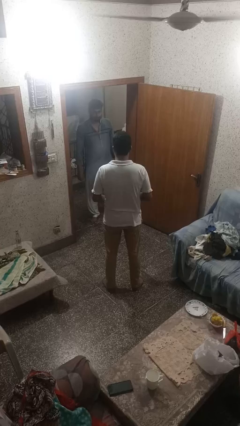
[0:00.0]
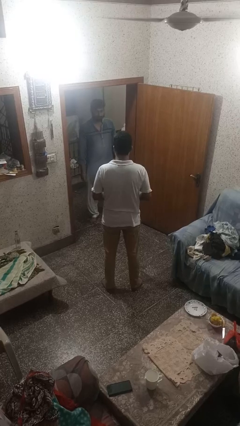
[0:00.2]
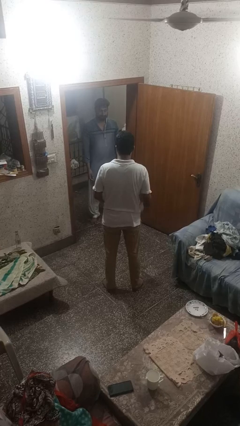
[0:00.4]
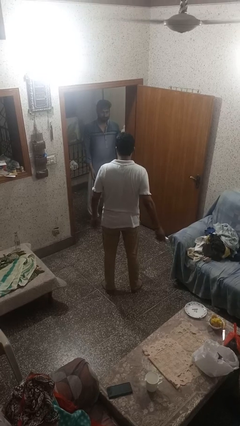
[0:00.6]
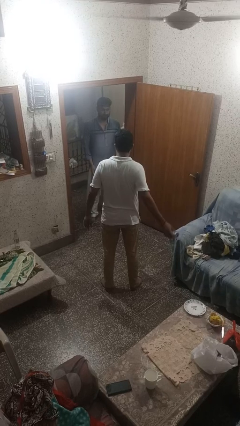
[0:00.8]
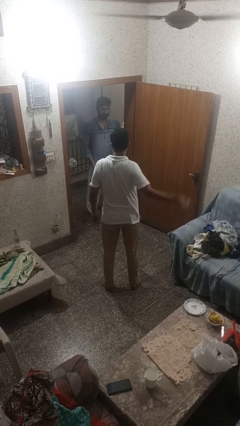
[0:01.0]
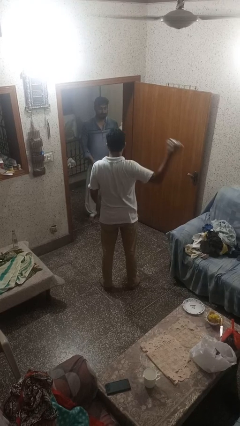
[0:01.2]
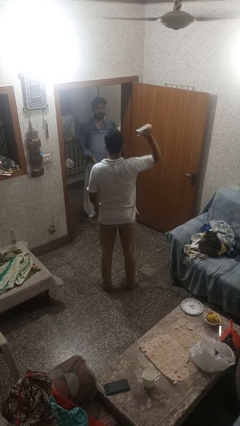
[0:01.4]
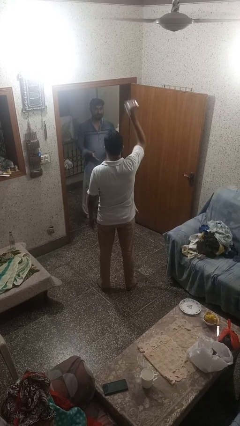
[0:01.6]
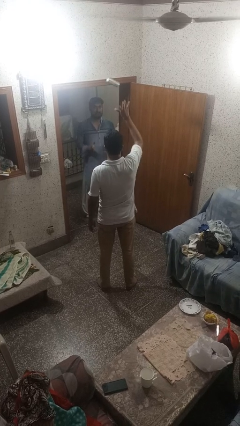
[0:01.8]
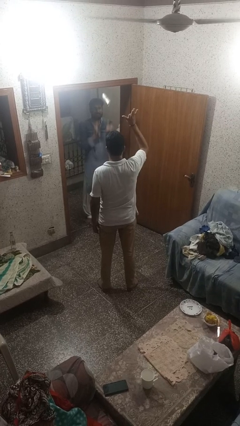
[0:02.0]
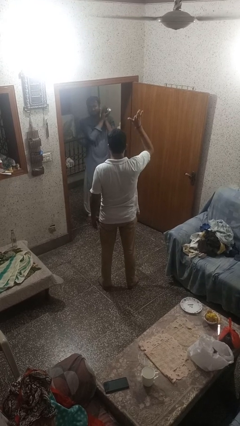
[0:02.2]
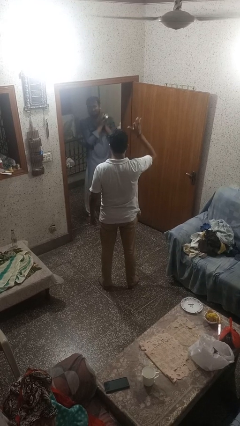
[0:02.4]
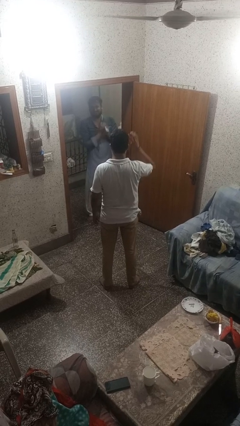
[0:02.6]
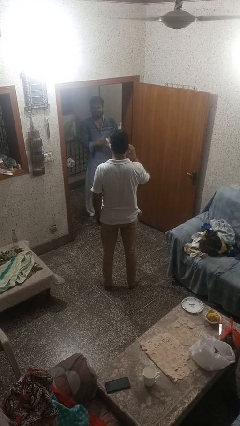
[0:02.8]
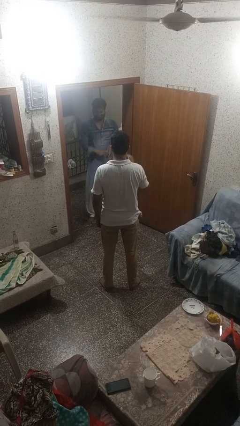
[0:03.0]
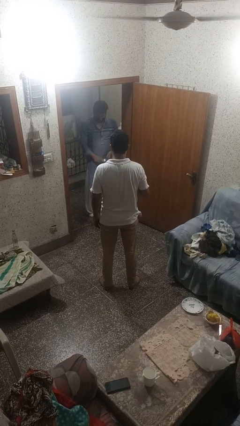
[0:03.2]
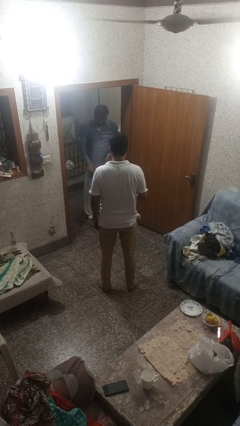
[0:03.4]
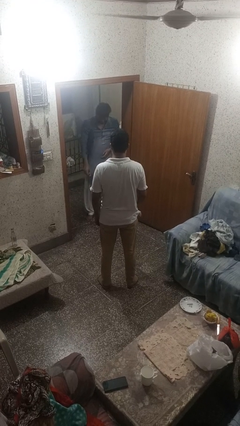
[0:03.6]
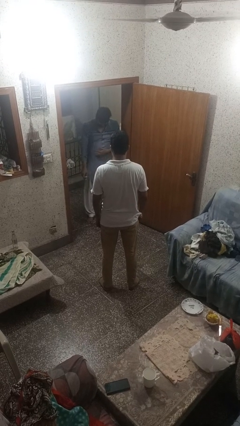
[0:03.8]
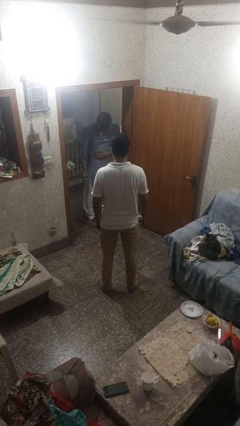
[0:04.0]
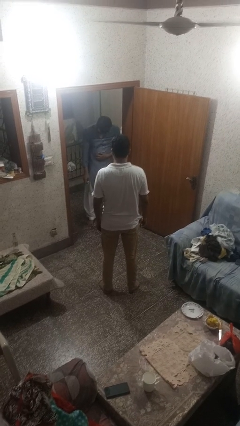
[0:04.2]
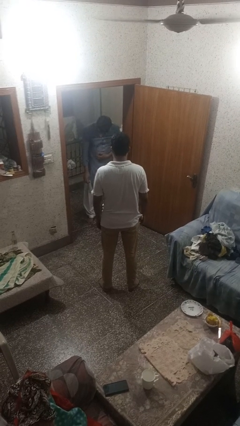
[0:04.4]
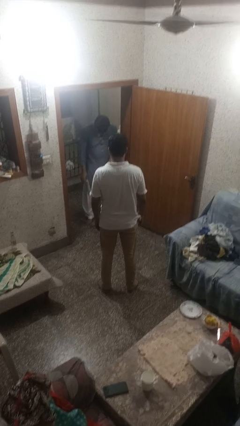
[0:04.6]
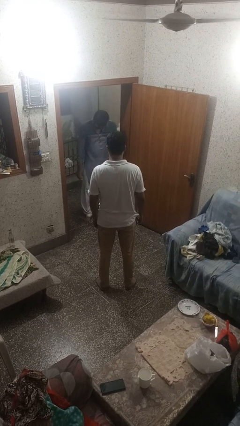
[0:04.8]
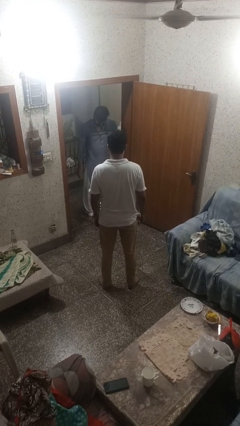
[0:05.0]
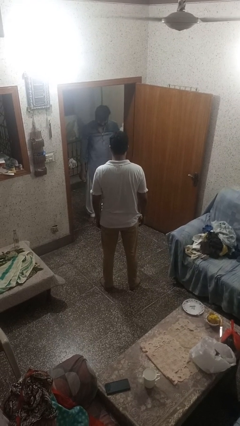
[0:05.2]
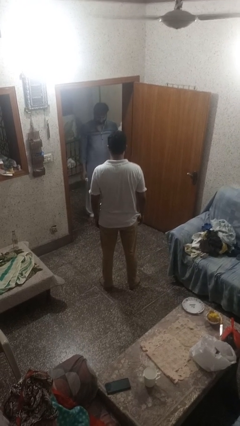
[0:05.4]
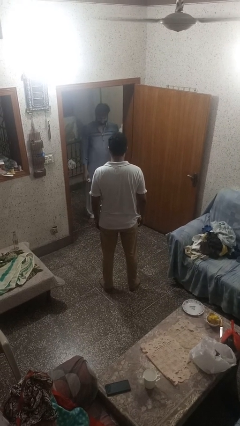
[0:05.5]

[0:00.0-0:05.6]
person throws object to person

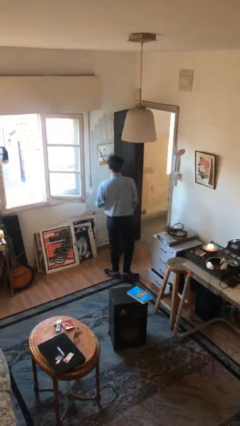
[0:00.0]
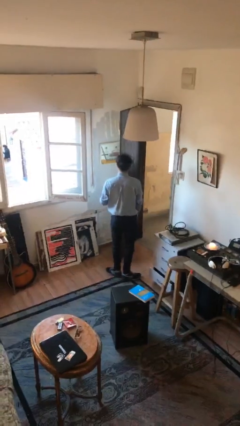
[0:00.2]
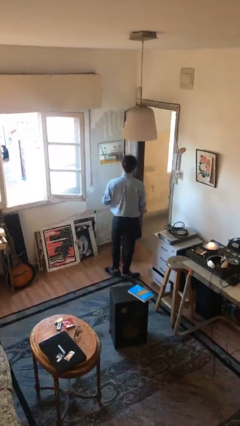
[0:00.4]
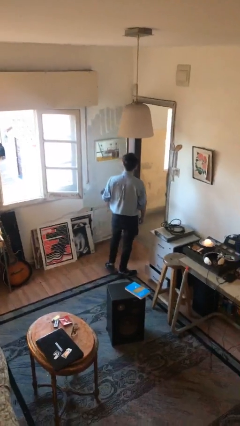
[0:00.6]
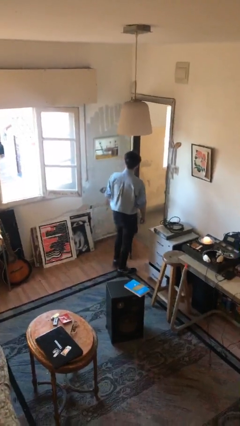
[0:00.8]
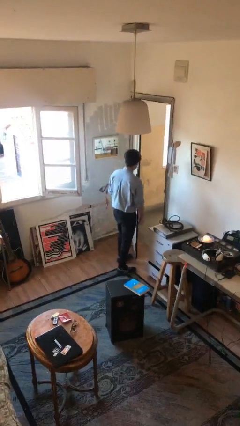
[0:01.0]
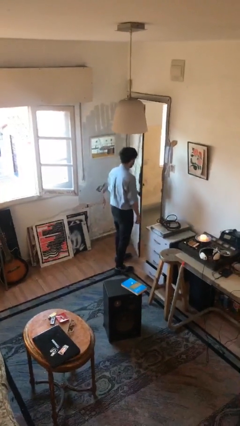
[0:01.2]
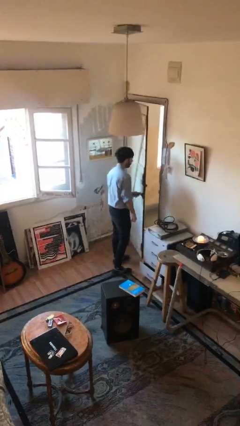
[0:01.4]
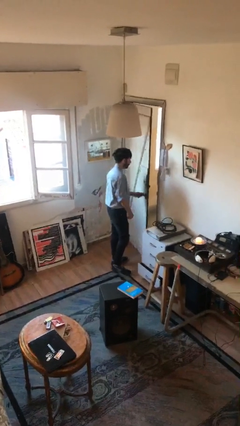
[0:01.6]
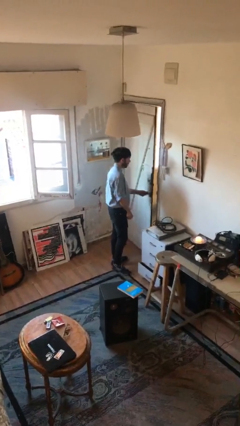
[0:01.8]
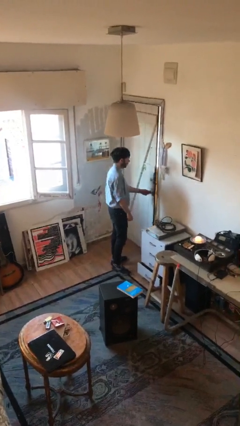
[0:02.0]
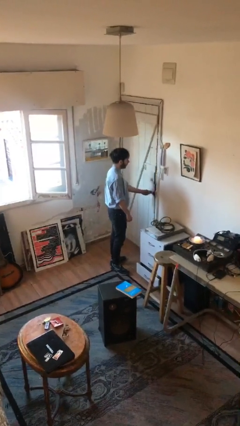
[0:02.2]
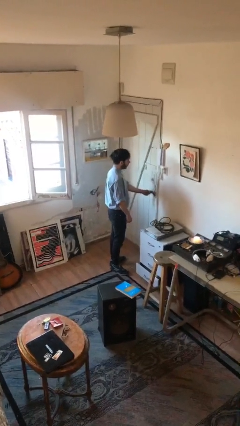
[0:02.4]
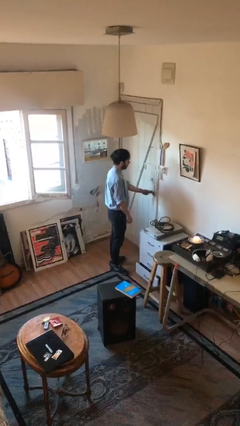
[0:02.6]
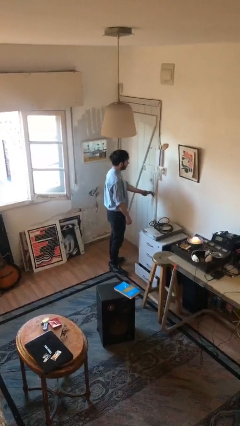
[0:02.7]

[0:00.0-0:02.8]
person closes facility door

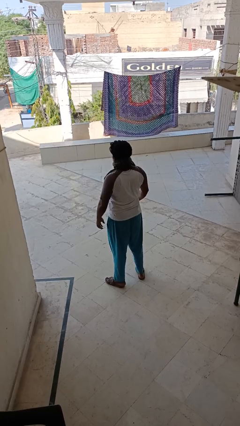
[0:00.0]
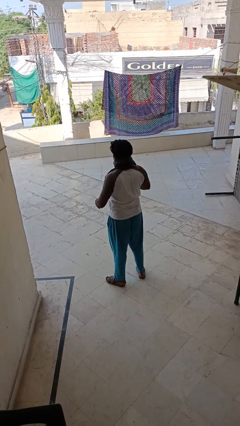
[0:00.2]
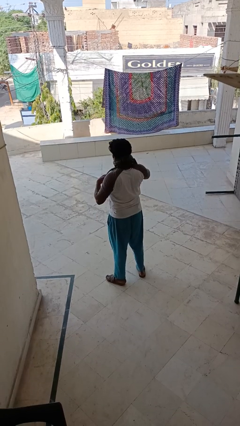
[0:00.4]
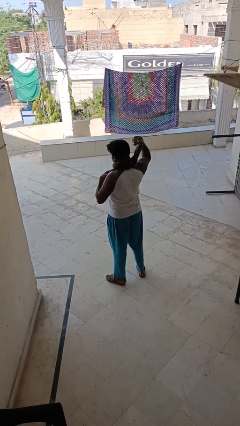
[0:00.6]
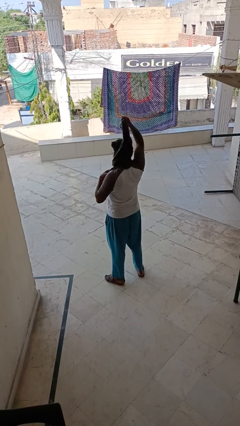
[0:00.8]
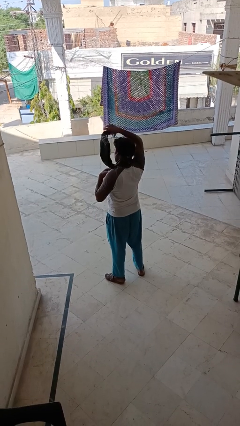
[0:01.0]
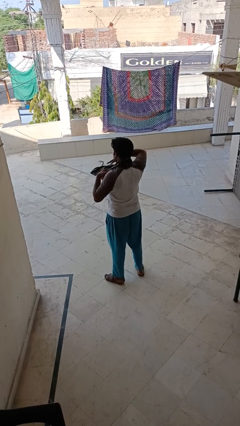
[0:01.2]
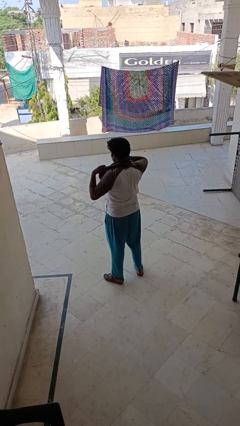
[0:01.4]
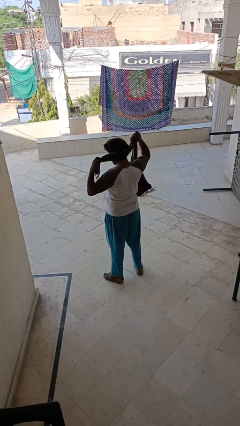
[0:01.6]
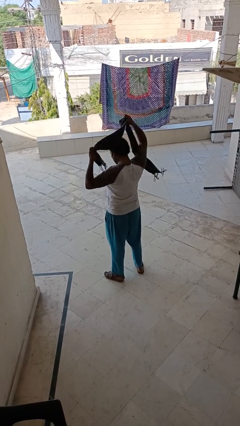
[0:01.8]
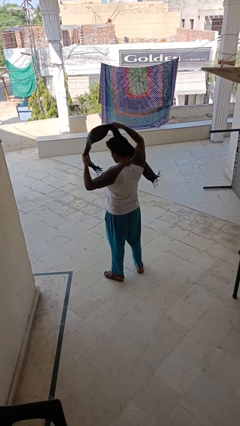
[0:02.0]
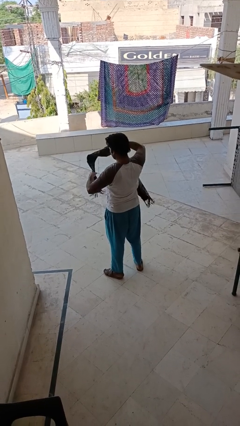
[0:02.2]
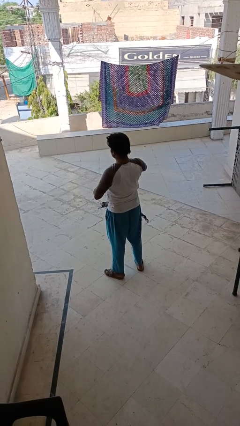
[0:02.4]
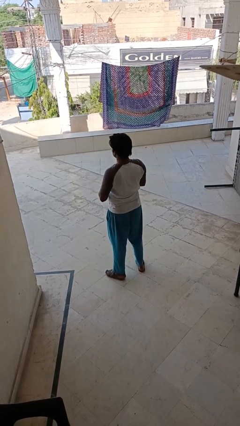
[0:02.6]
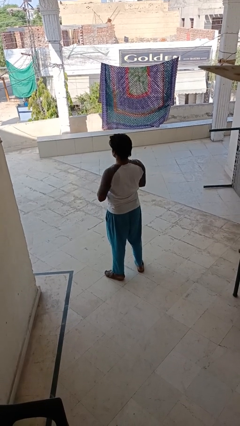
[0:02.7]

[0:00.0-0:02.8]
person takes off scarf

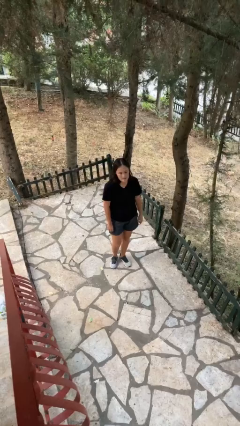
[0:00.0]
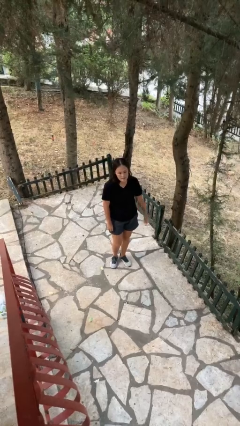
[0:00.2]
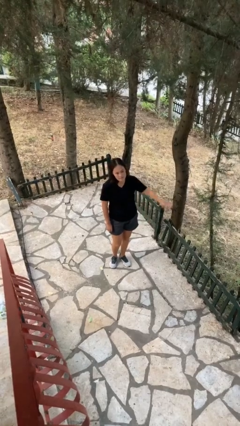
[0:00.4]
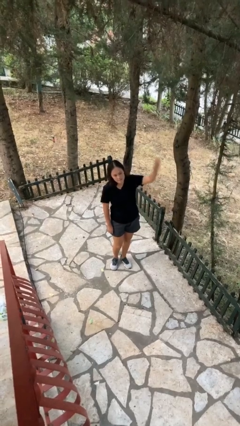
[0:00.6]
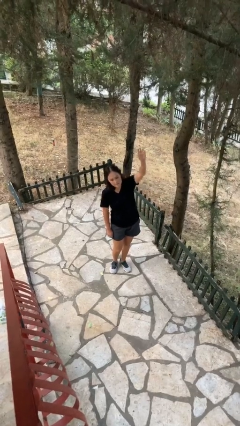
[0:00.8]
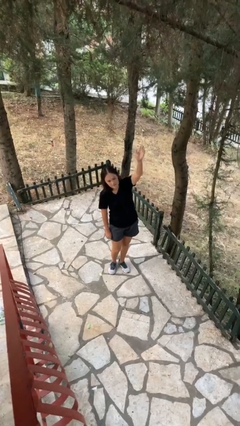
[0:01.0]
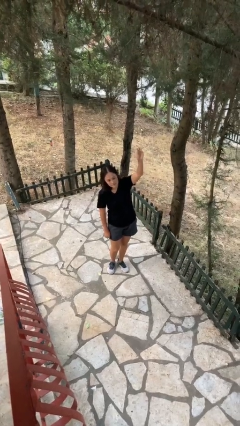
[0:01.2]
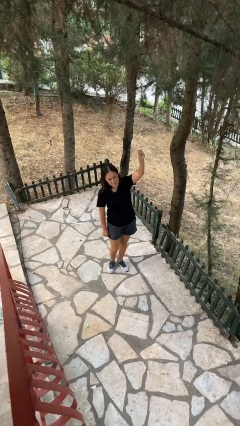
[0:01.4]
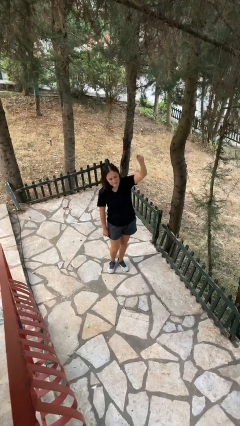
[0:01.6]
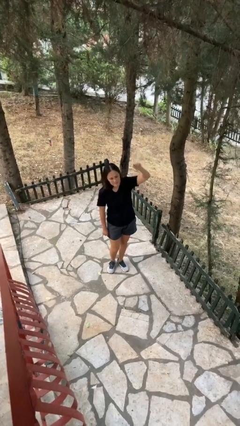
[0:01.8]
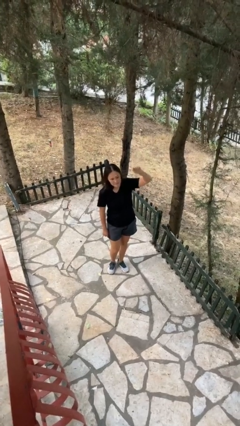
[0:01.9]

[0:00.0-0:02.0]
person gestures raise hand

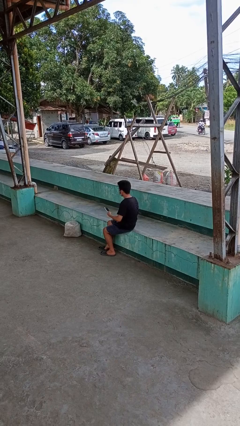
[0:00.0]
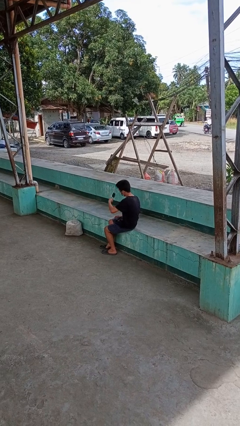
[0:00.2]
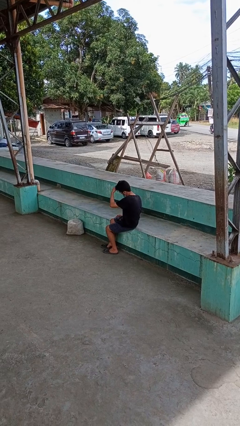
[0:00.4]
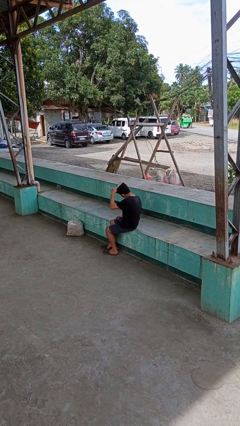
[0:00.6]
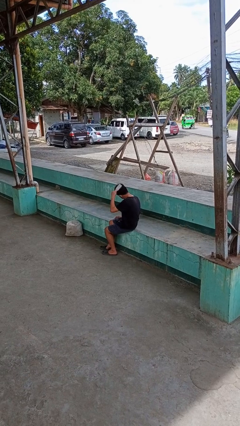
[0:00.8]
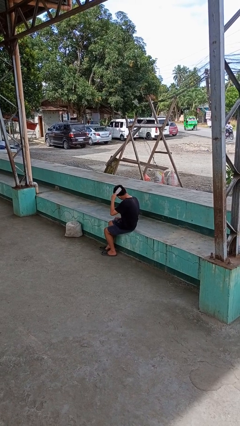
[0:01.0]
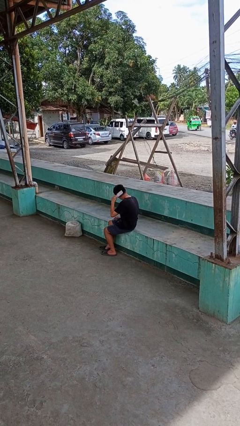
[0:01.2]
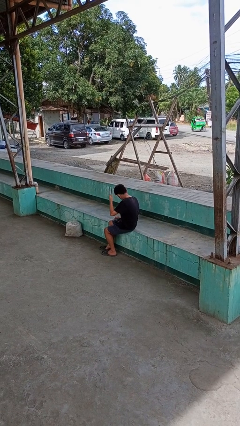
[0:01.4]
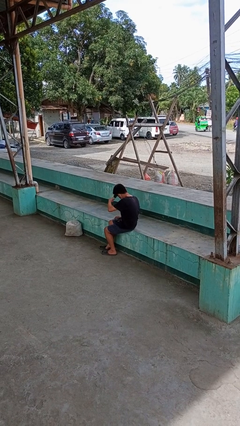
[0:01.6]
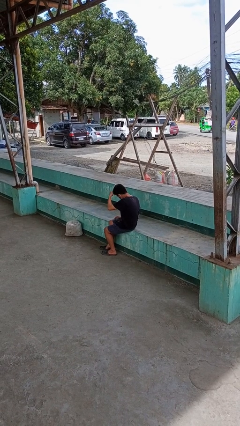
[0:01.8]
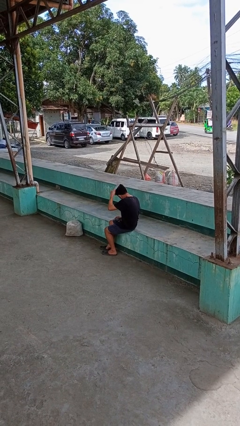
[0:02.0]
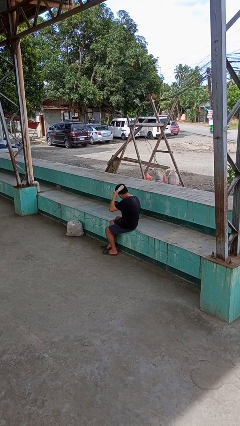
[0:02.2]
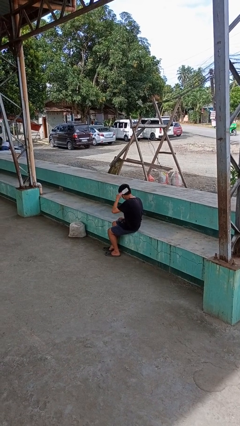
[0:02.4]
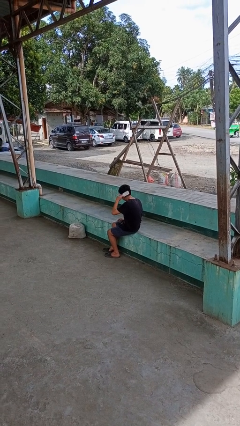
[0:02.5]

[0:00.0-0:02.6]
person brushes hair

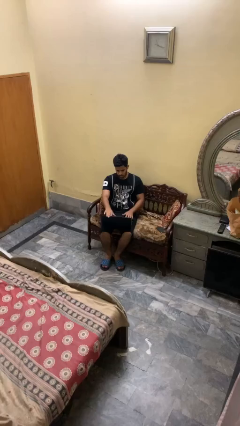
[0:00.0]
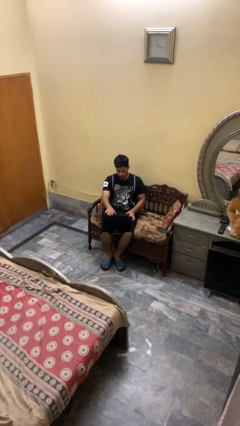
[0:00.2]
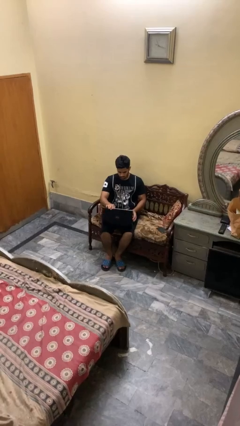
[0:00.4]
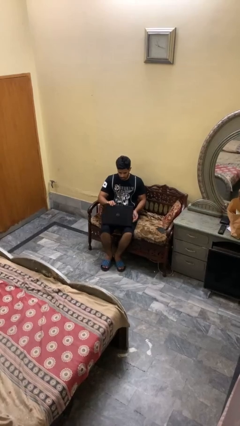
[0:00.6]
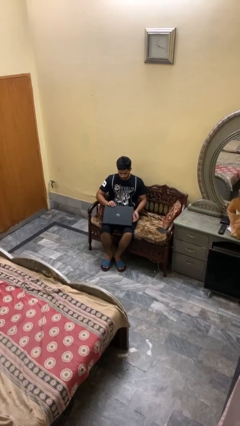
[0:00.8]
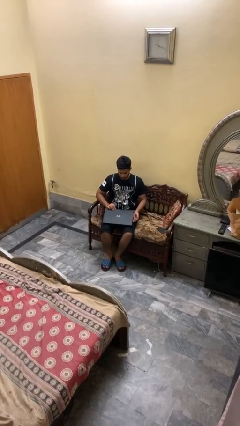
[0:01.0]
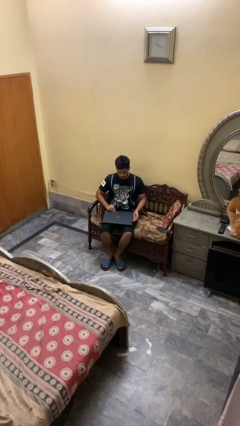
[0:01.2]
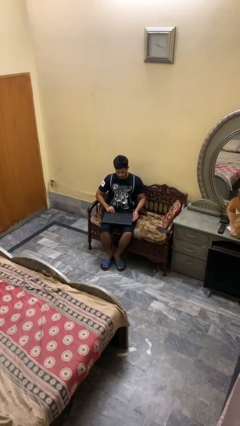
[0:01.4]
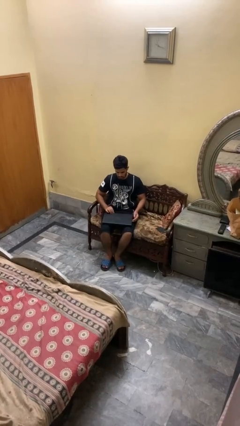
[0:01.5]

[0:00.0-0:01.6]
person closes laptop

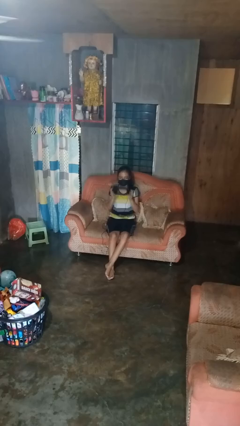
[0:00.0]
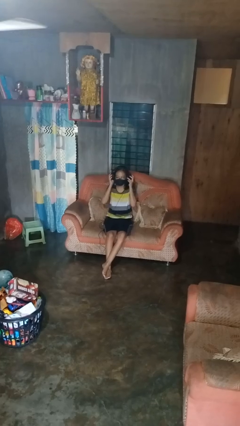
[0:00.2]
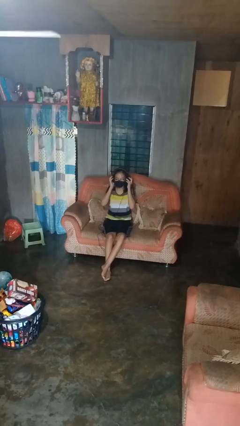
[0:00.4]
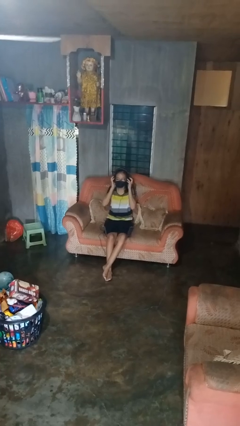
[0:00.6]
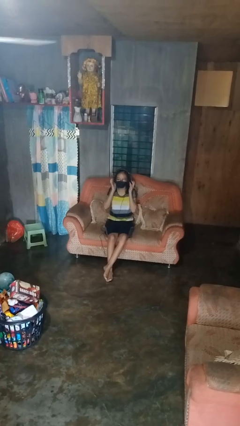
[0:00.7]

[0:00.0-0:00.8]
person puts on headphones
